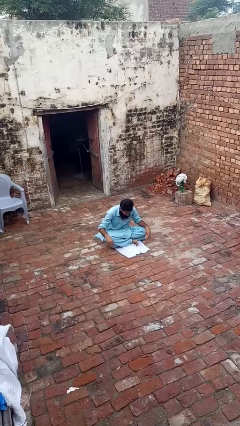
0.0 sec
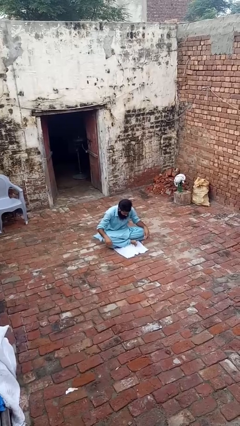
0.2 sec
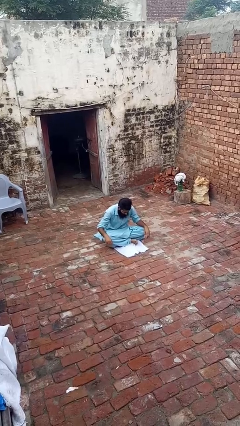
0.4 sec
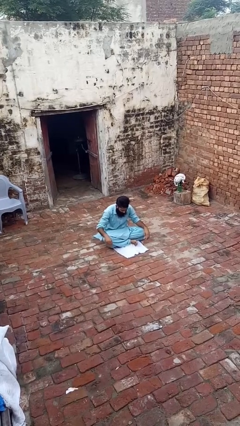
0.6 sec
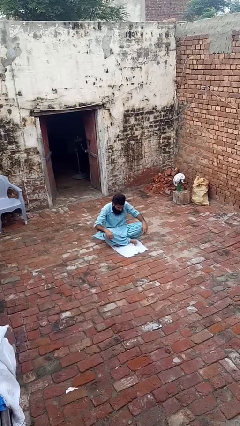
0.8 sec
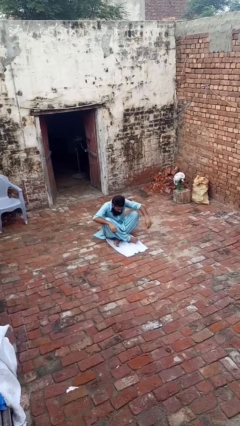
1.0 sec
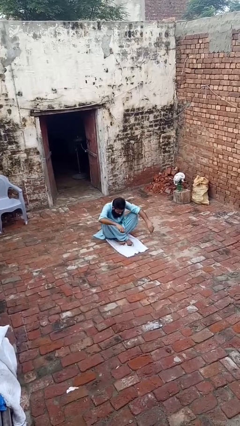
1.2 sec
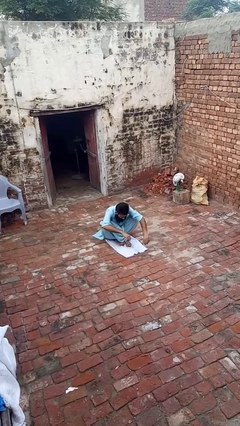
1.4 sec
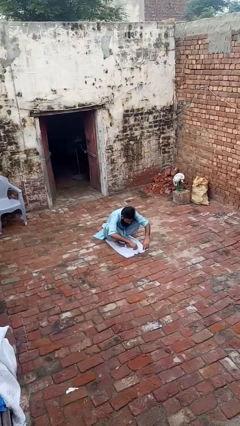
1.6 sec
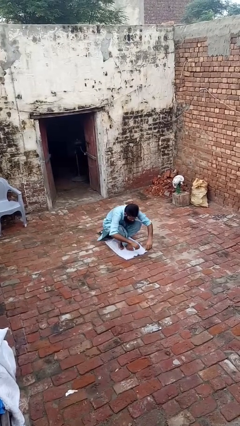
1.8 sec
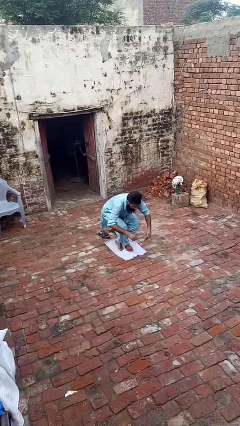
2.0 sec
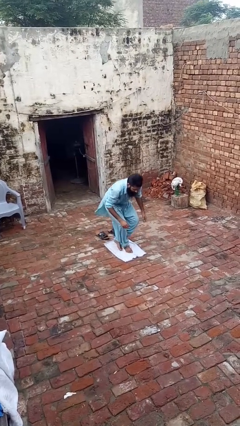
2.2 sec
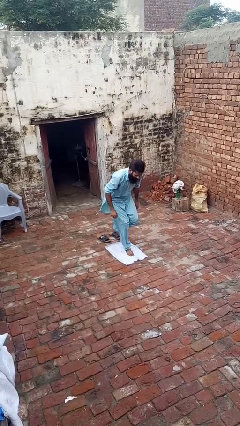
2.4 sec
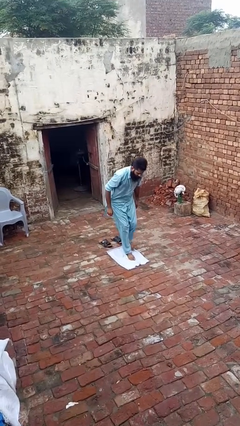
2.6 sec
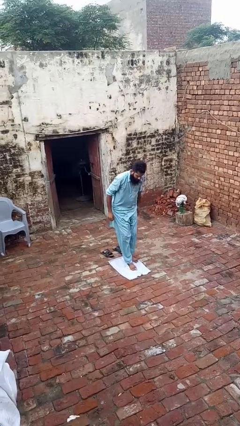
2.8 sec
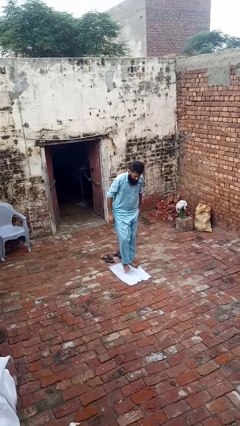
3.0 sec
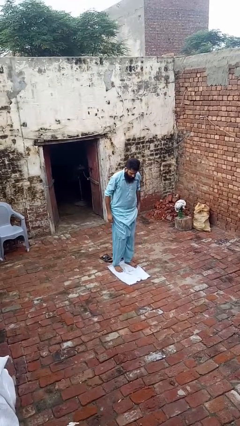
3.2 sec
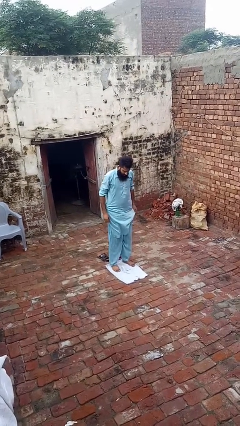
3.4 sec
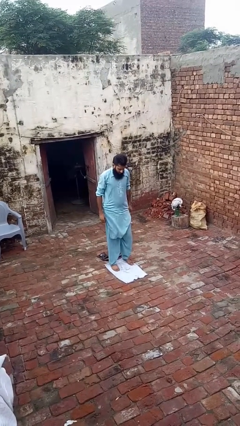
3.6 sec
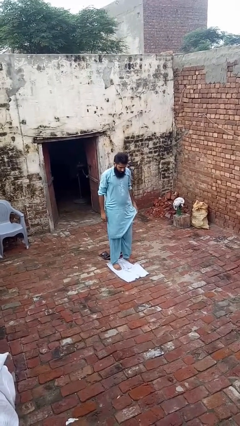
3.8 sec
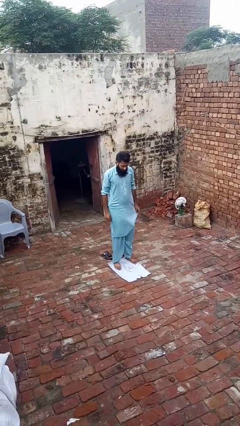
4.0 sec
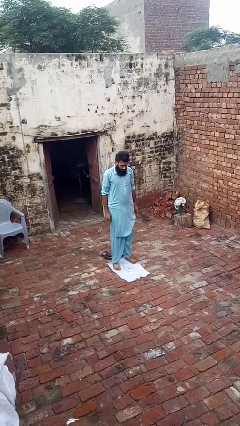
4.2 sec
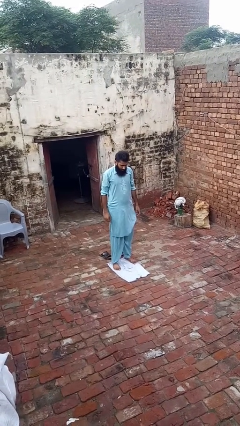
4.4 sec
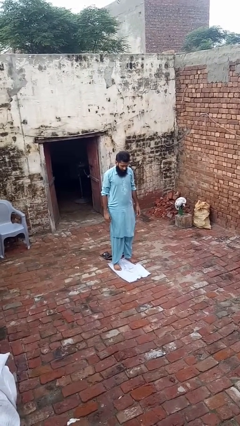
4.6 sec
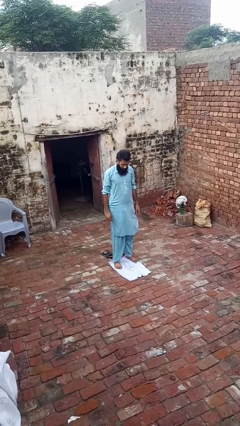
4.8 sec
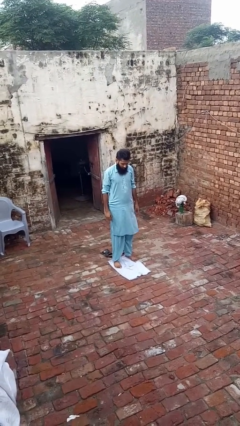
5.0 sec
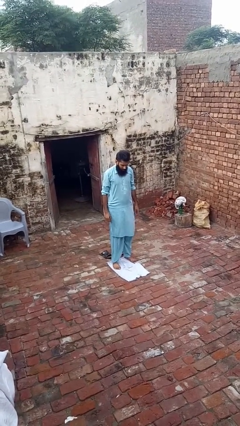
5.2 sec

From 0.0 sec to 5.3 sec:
person stands up from floor

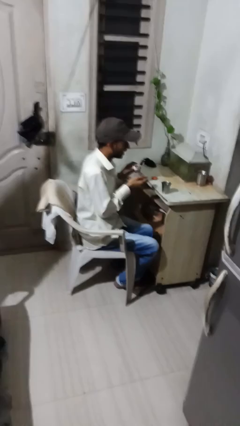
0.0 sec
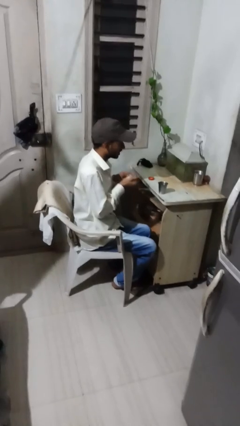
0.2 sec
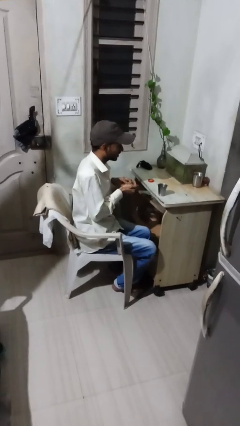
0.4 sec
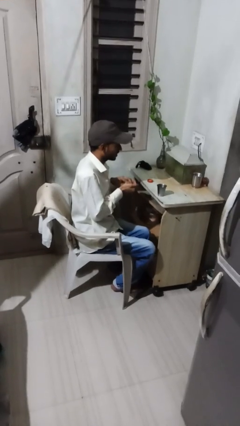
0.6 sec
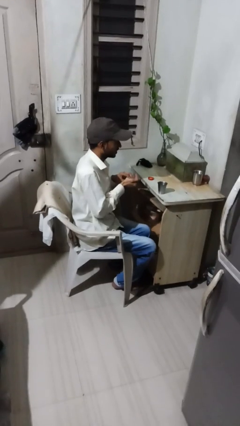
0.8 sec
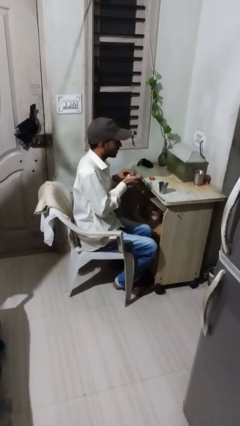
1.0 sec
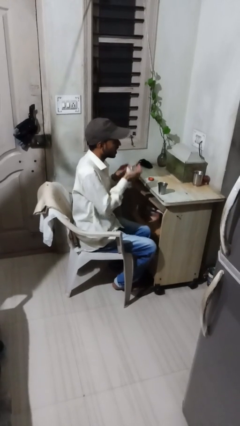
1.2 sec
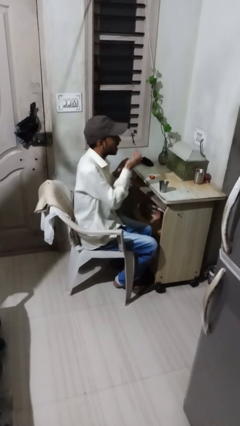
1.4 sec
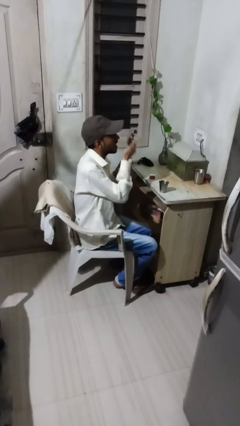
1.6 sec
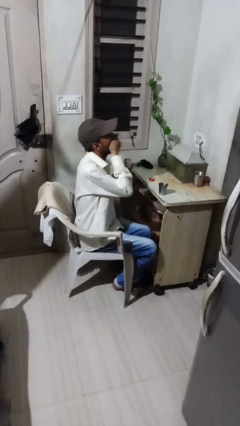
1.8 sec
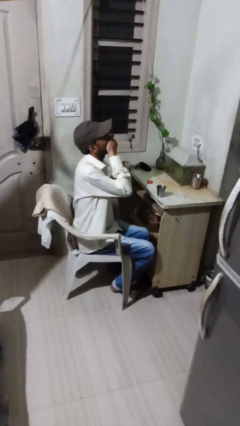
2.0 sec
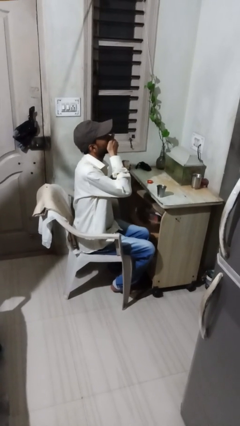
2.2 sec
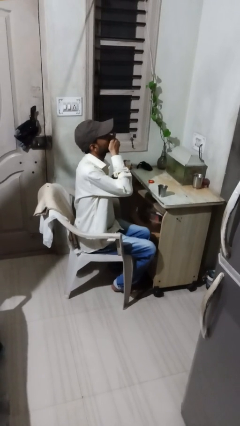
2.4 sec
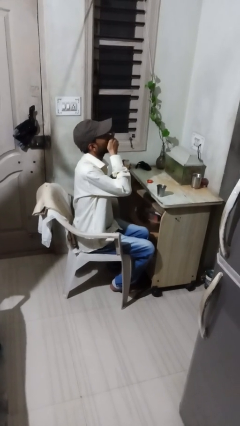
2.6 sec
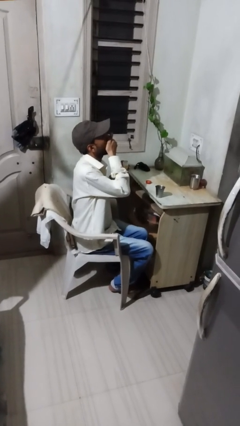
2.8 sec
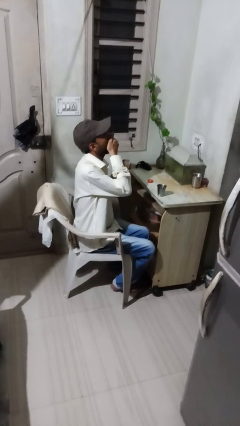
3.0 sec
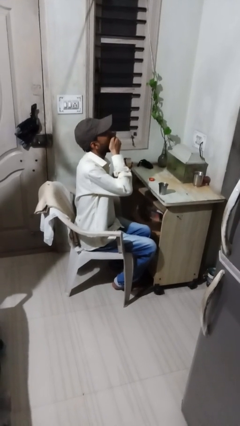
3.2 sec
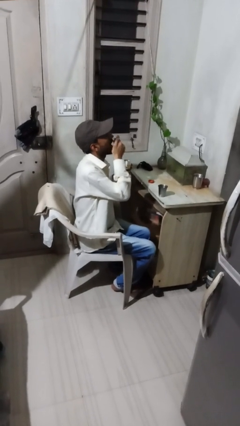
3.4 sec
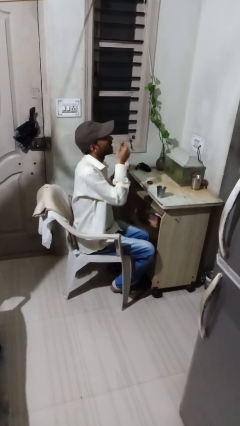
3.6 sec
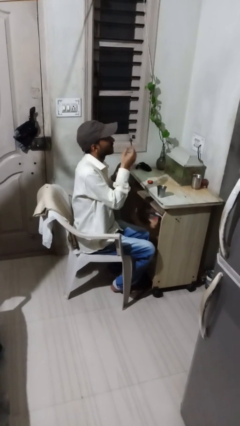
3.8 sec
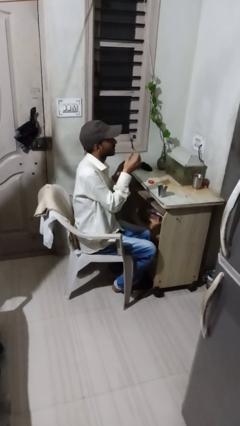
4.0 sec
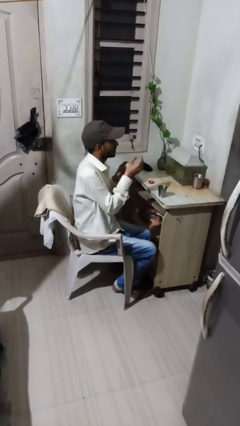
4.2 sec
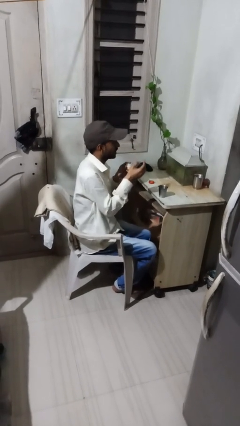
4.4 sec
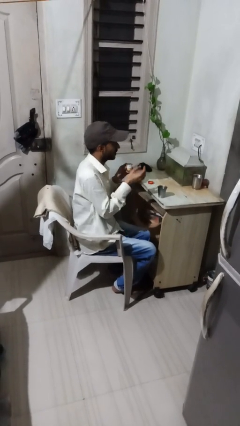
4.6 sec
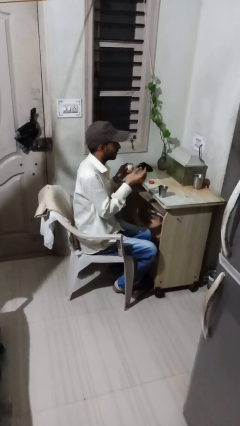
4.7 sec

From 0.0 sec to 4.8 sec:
person takes medicine pills

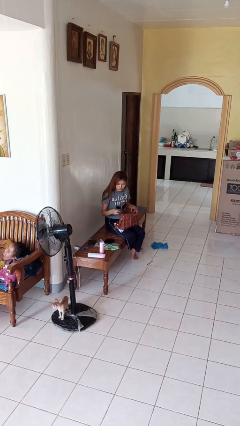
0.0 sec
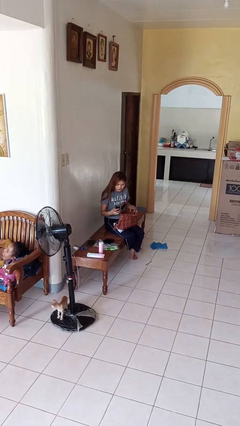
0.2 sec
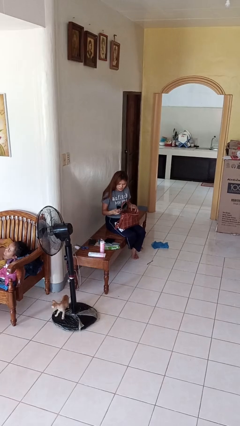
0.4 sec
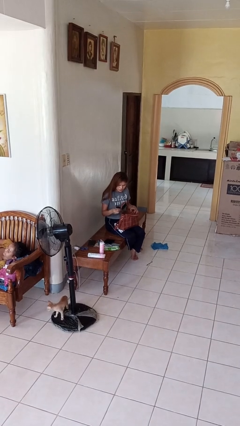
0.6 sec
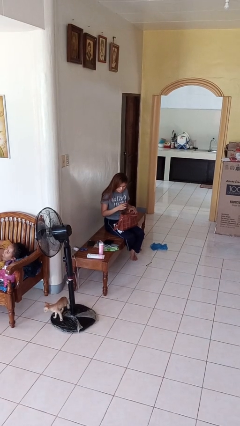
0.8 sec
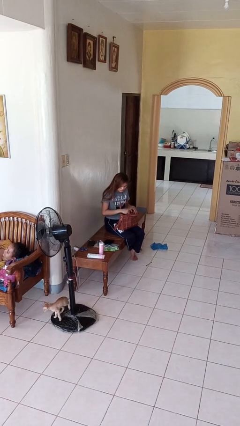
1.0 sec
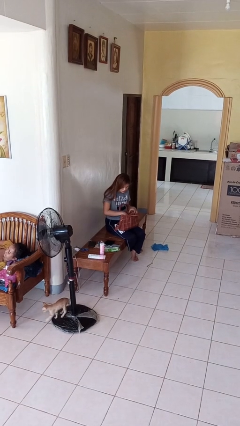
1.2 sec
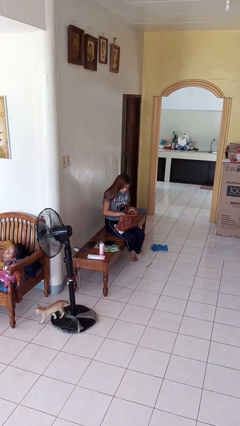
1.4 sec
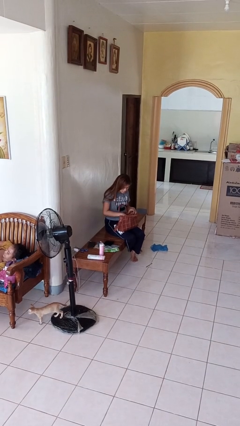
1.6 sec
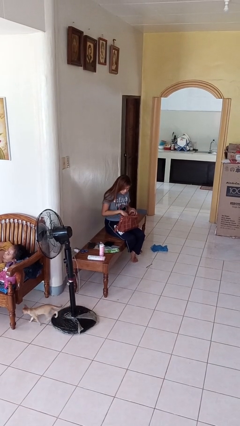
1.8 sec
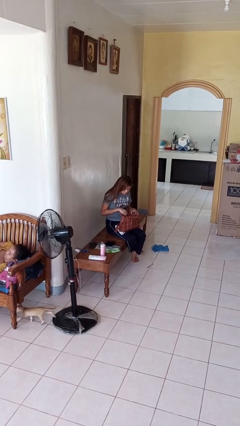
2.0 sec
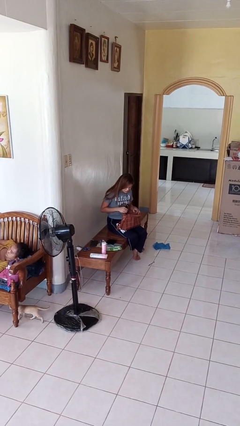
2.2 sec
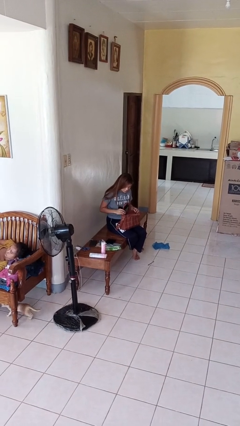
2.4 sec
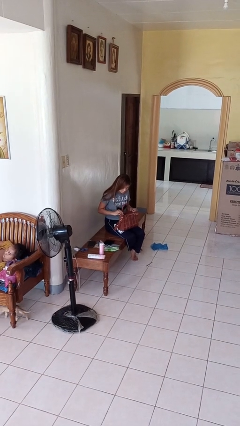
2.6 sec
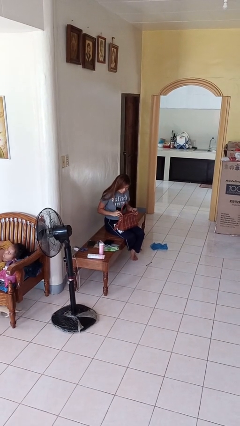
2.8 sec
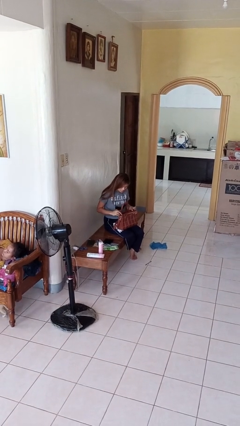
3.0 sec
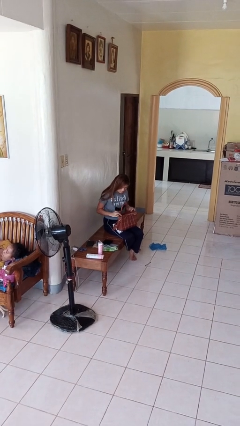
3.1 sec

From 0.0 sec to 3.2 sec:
person puts object into purse

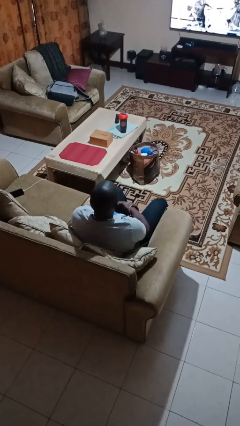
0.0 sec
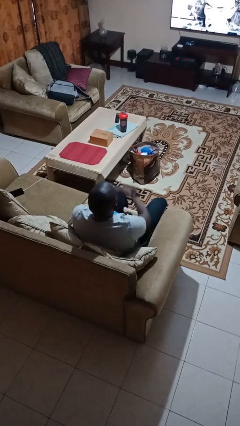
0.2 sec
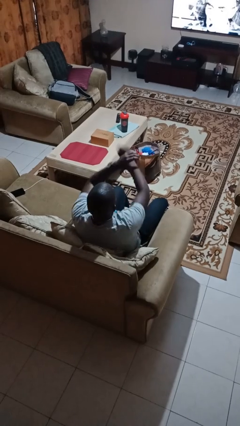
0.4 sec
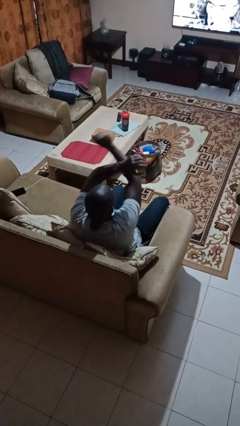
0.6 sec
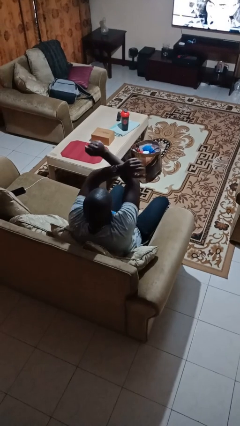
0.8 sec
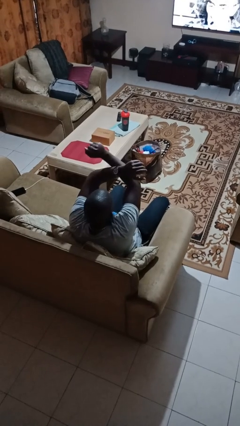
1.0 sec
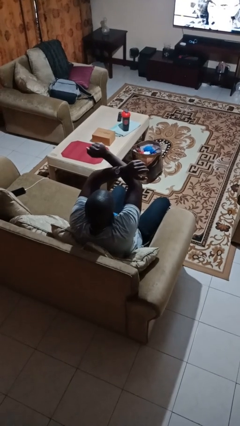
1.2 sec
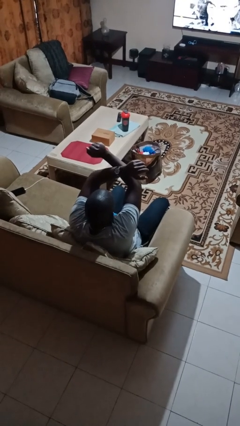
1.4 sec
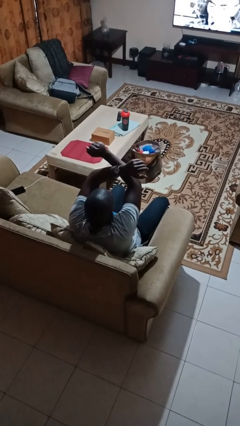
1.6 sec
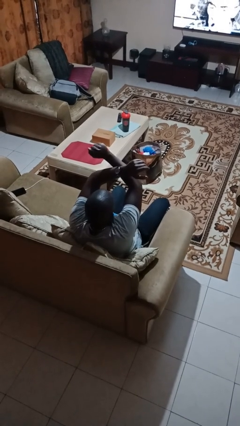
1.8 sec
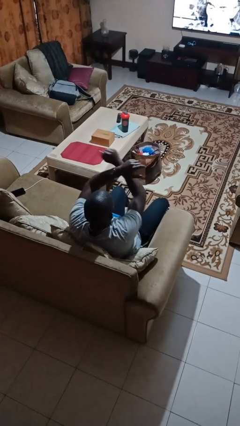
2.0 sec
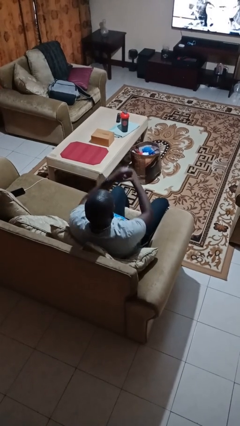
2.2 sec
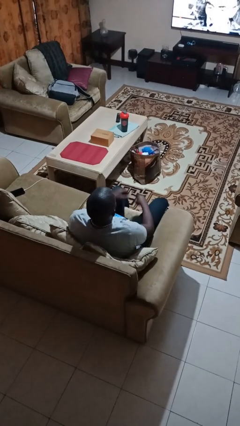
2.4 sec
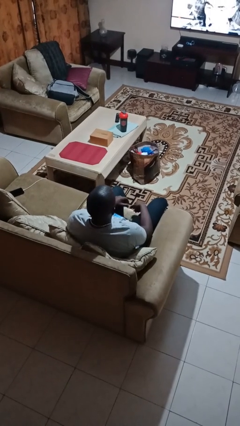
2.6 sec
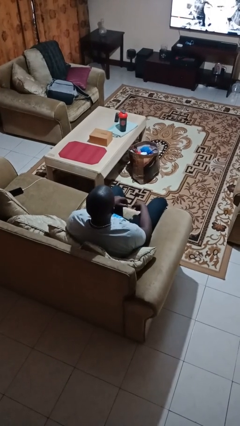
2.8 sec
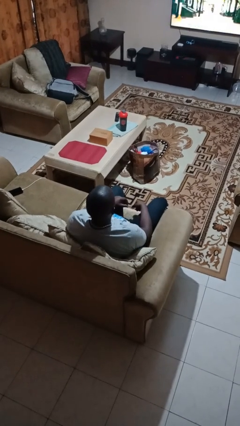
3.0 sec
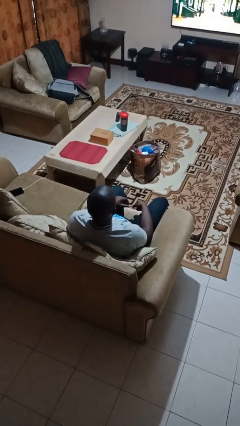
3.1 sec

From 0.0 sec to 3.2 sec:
person gestures arms x

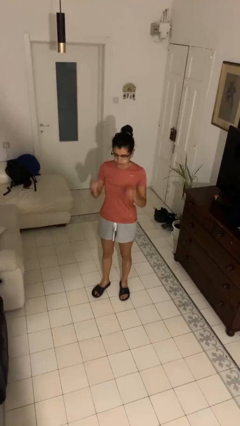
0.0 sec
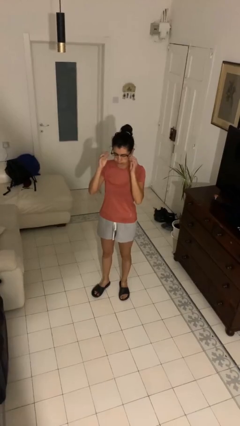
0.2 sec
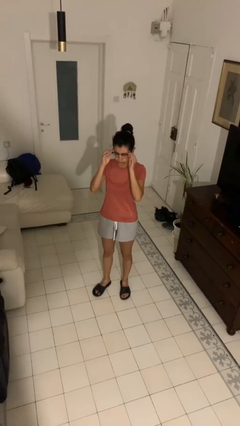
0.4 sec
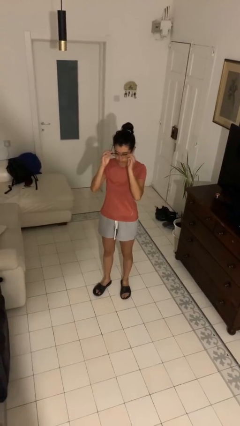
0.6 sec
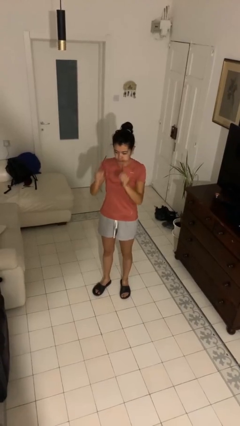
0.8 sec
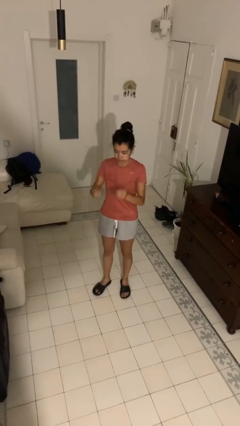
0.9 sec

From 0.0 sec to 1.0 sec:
person takes off glasses

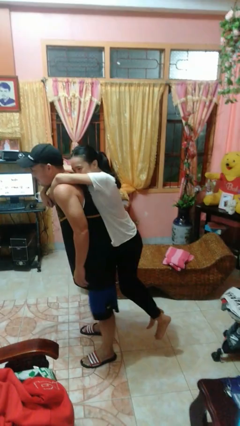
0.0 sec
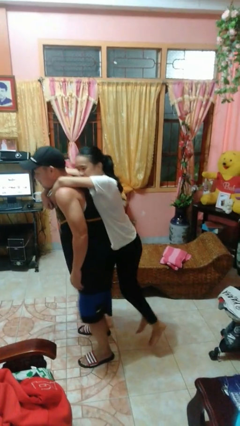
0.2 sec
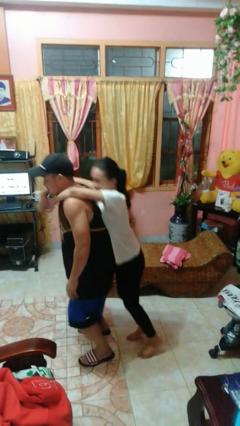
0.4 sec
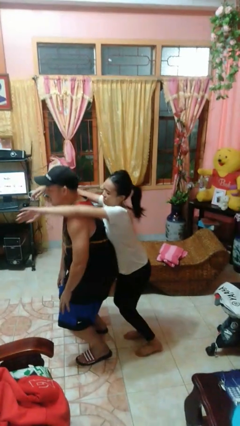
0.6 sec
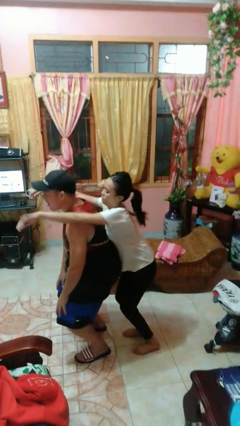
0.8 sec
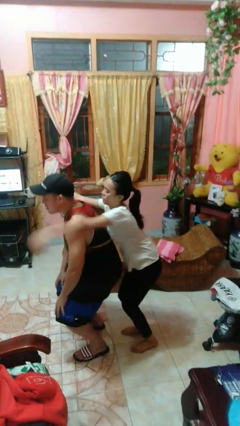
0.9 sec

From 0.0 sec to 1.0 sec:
person puts down person
